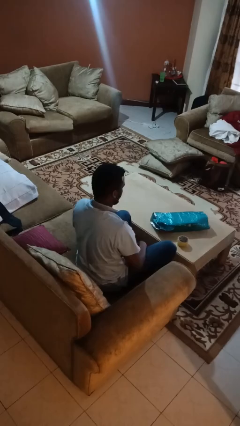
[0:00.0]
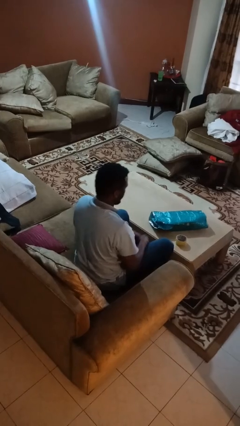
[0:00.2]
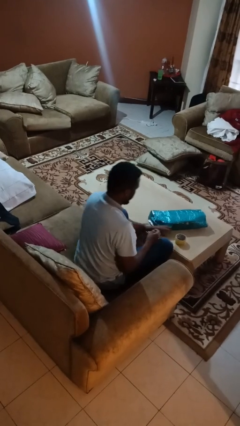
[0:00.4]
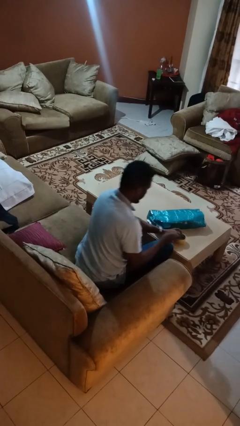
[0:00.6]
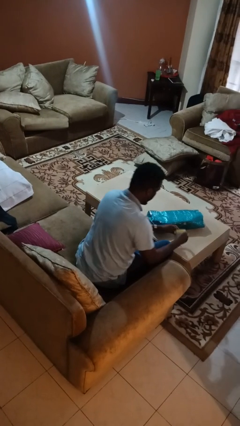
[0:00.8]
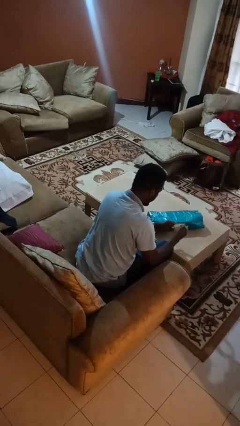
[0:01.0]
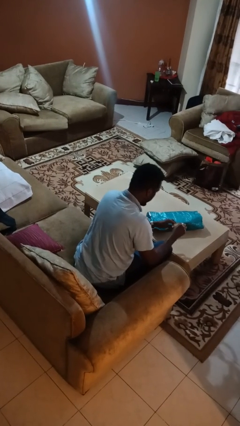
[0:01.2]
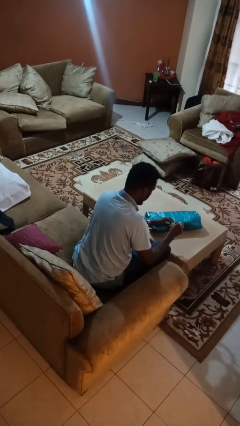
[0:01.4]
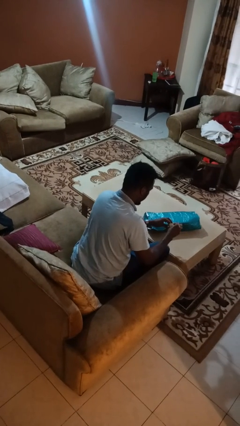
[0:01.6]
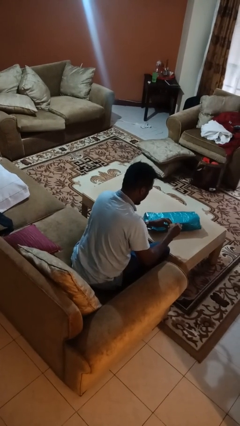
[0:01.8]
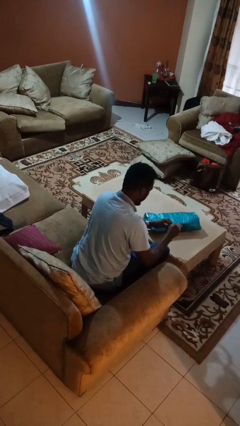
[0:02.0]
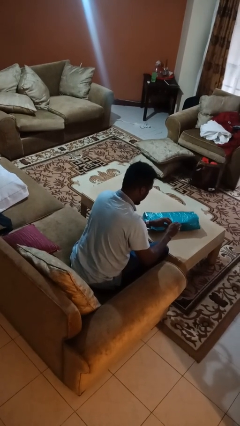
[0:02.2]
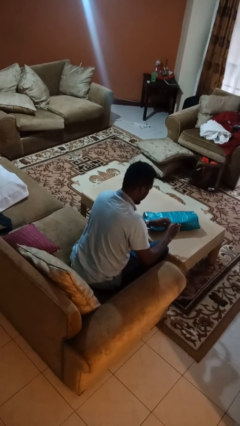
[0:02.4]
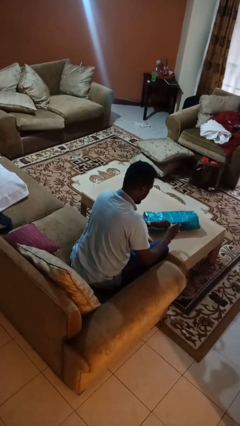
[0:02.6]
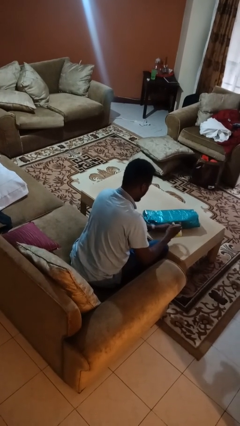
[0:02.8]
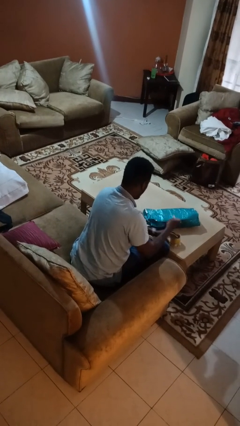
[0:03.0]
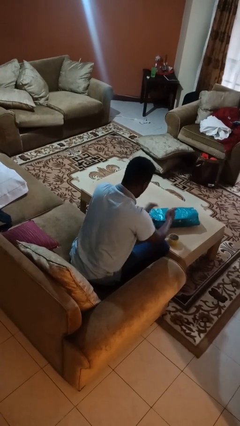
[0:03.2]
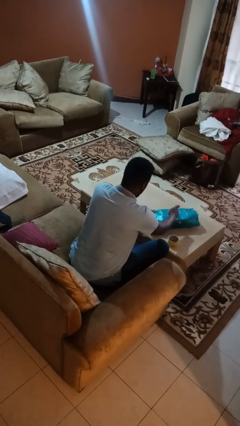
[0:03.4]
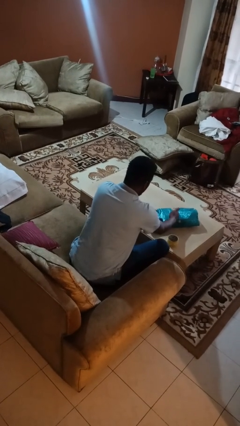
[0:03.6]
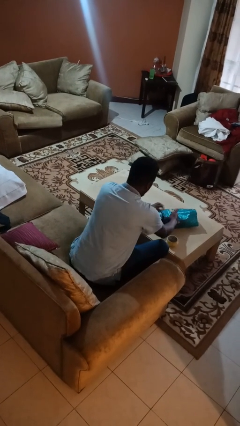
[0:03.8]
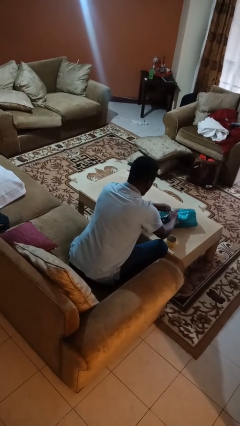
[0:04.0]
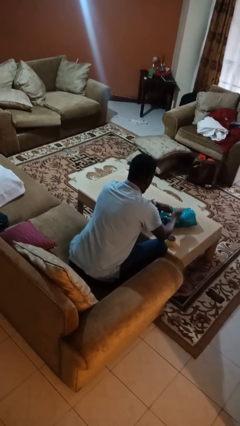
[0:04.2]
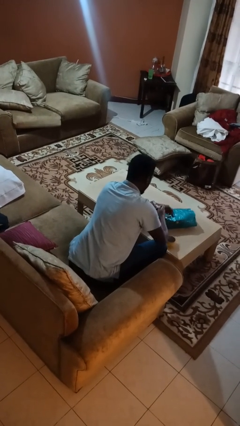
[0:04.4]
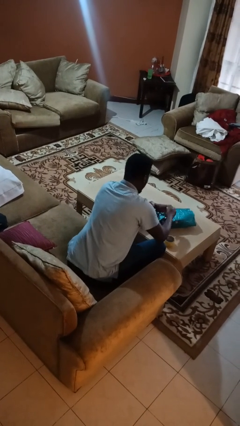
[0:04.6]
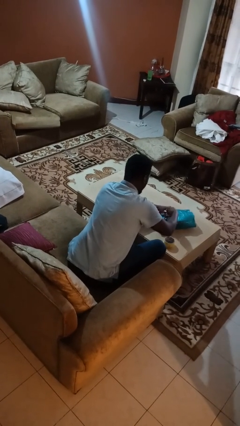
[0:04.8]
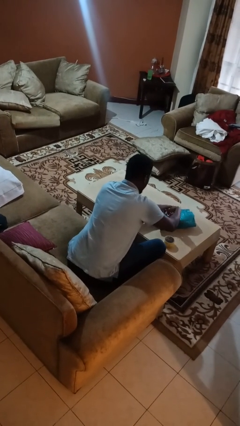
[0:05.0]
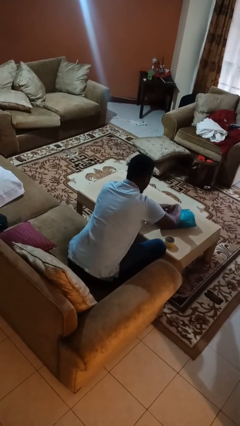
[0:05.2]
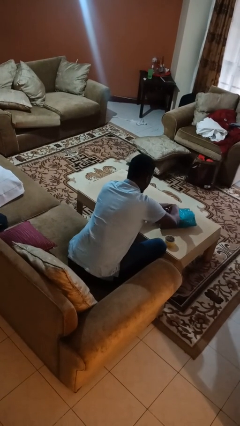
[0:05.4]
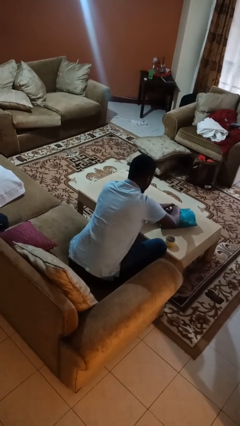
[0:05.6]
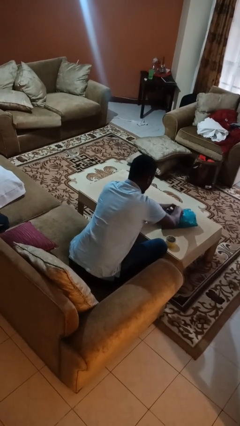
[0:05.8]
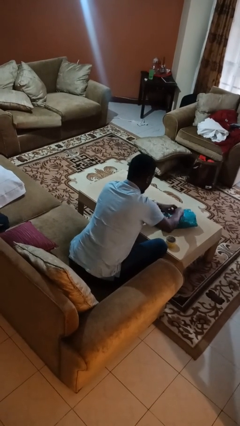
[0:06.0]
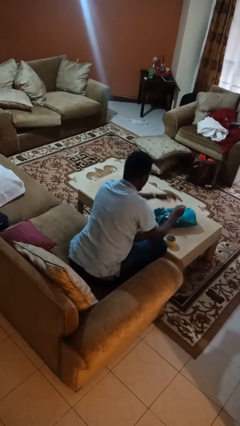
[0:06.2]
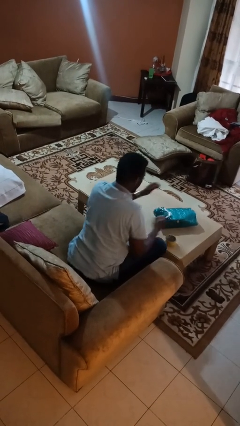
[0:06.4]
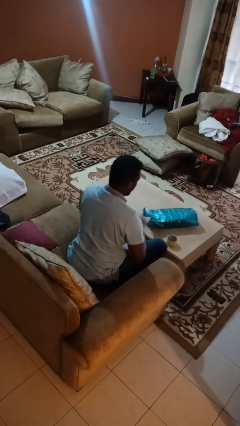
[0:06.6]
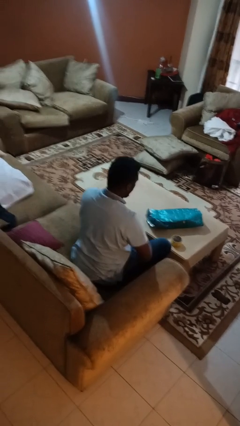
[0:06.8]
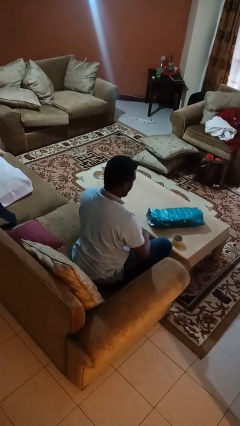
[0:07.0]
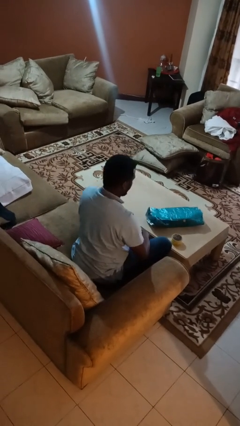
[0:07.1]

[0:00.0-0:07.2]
person wraps box

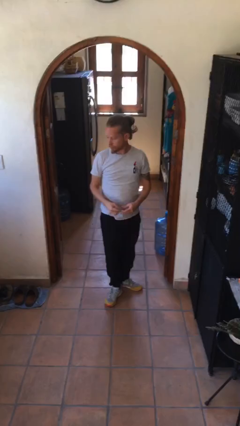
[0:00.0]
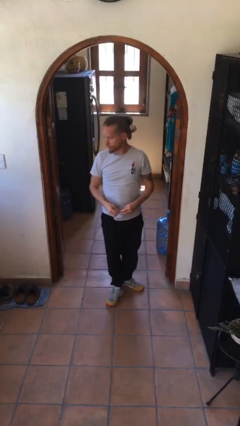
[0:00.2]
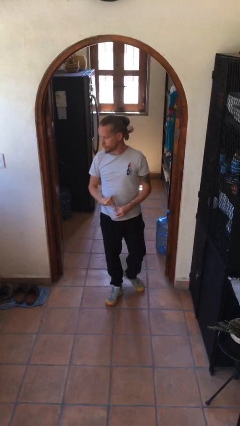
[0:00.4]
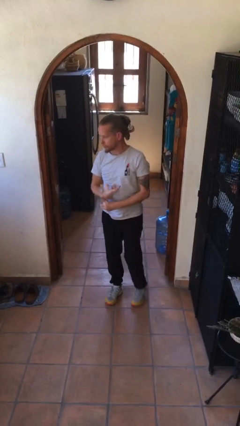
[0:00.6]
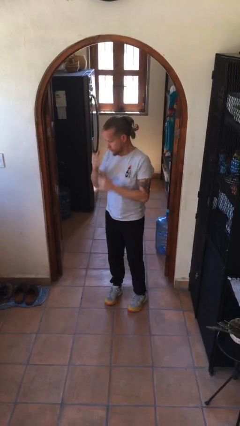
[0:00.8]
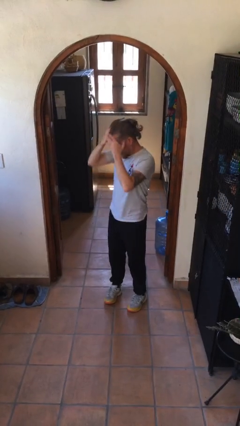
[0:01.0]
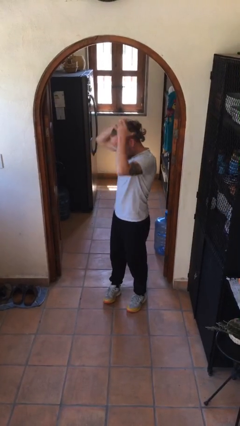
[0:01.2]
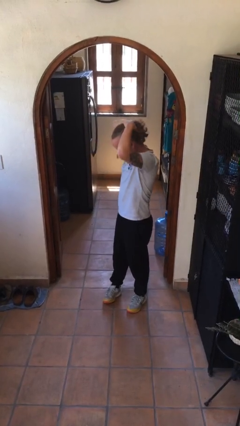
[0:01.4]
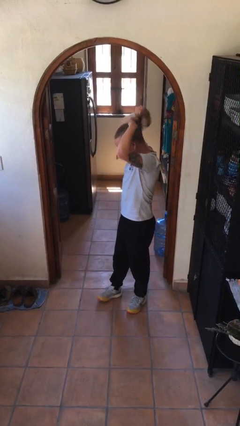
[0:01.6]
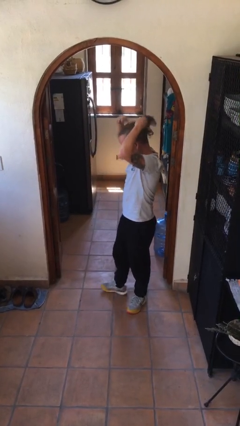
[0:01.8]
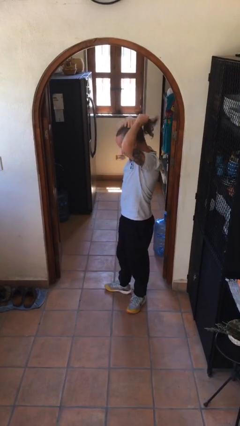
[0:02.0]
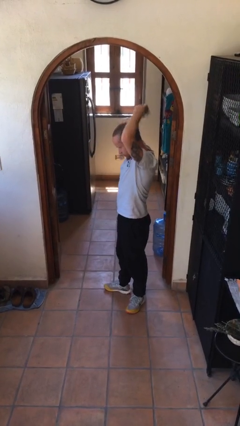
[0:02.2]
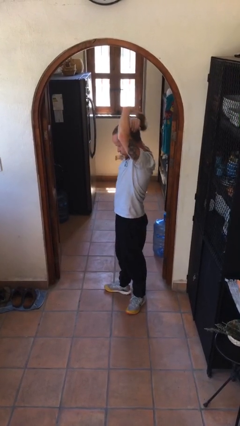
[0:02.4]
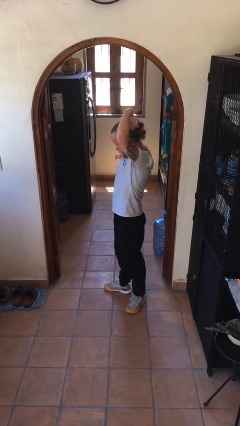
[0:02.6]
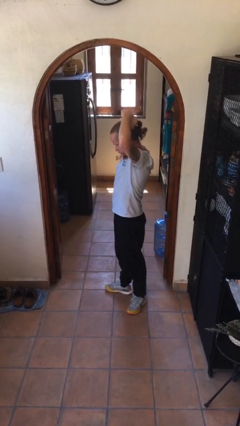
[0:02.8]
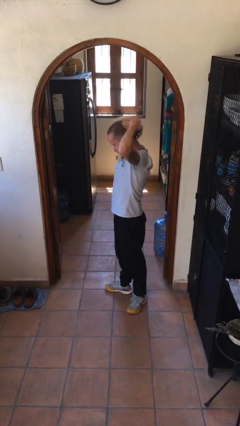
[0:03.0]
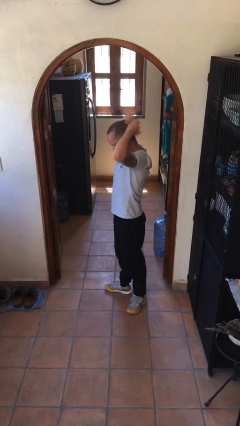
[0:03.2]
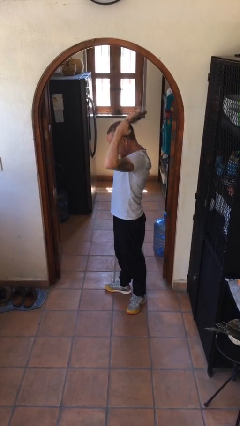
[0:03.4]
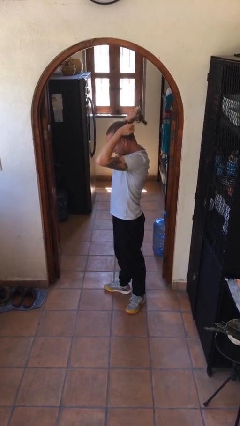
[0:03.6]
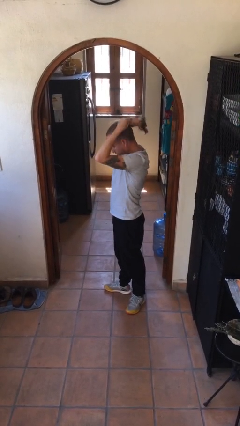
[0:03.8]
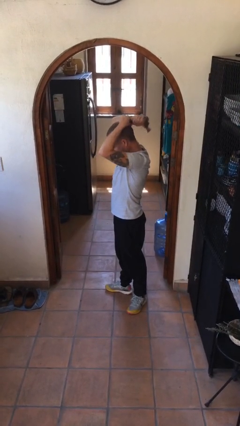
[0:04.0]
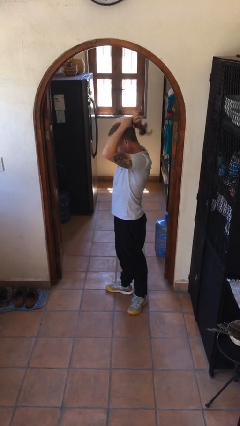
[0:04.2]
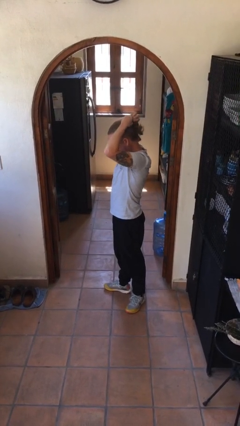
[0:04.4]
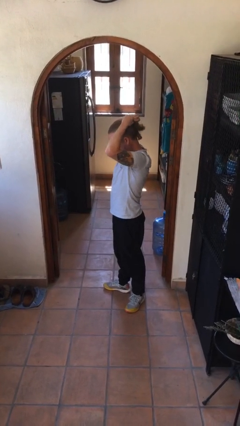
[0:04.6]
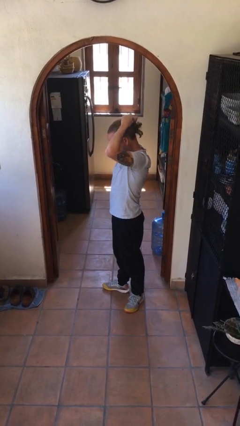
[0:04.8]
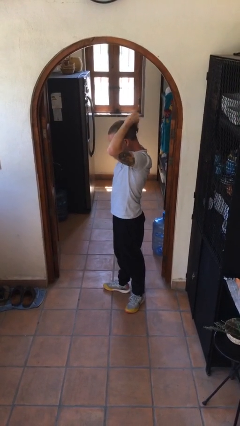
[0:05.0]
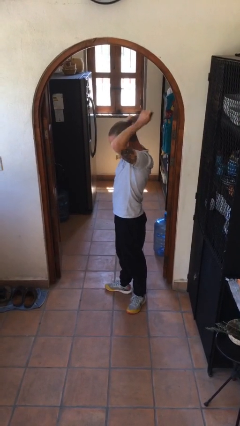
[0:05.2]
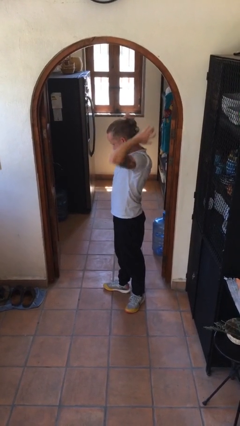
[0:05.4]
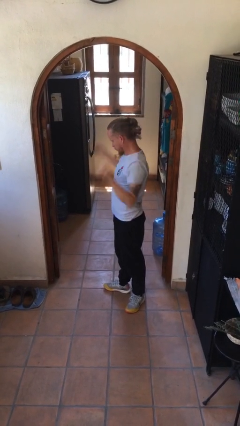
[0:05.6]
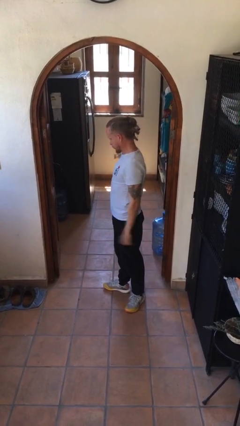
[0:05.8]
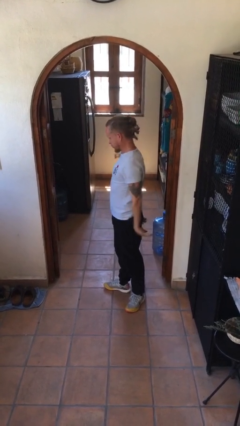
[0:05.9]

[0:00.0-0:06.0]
person puts hair in ponytail

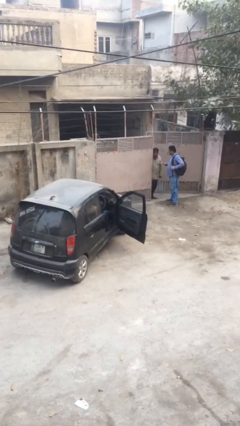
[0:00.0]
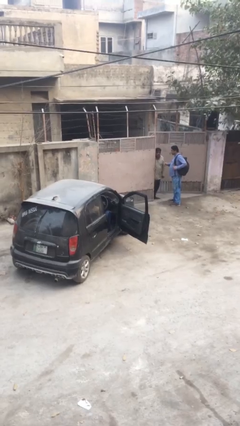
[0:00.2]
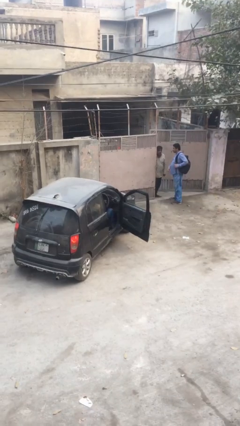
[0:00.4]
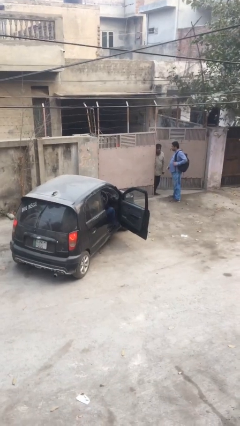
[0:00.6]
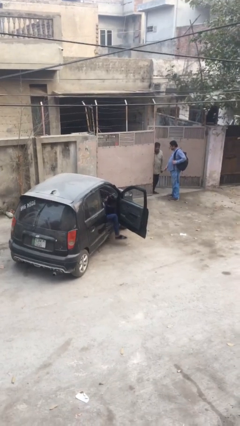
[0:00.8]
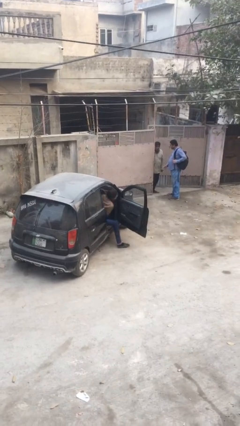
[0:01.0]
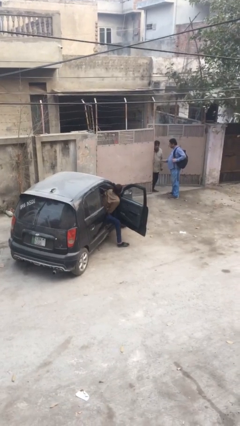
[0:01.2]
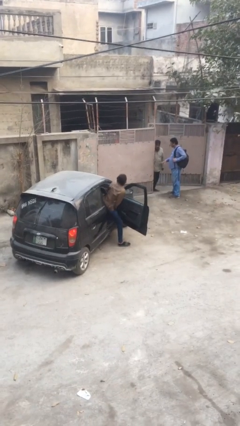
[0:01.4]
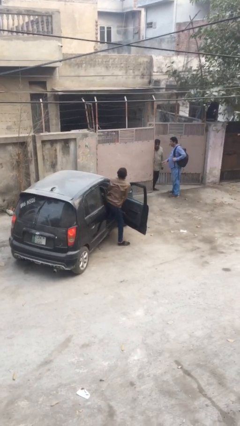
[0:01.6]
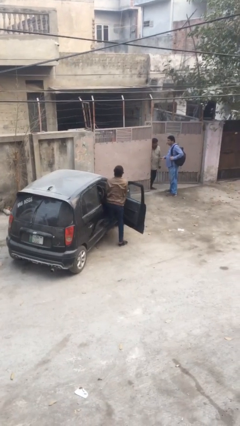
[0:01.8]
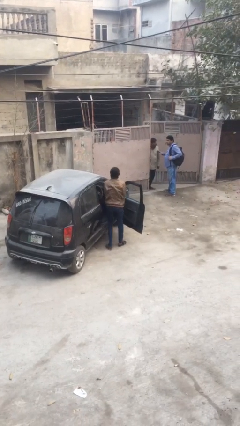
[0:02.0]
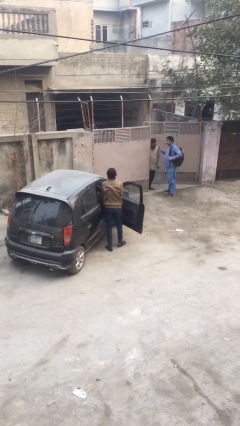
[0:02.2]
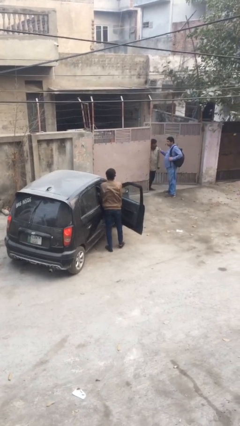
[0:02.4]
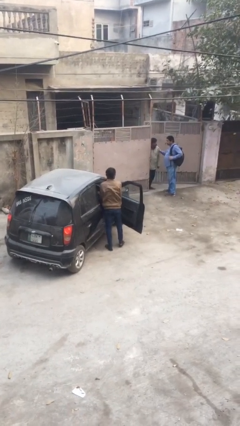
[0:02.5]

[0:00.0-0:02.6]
person exits car

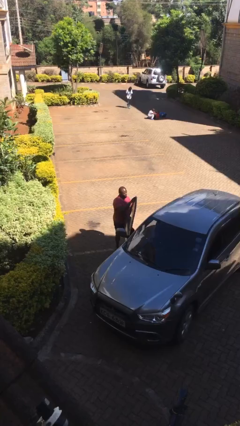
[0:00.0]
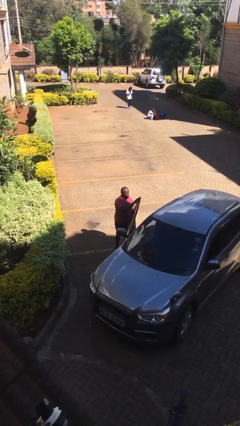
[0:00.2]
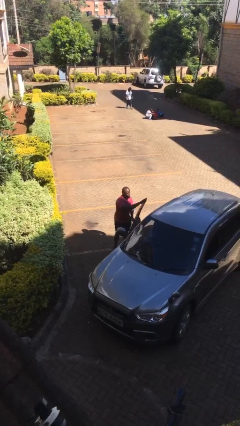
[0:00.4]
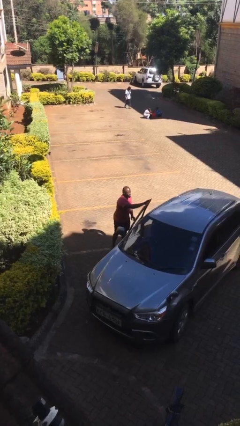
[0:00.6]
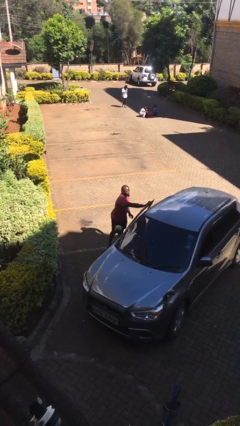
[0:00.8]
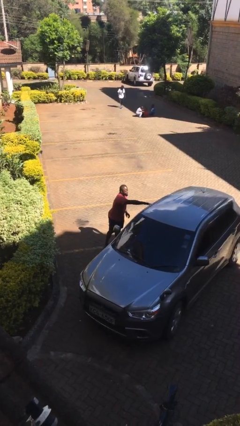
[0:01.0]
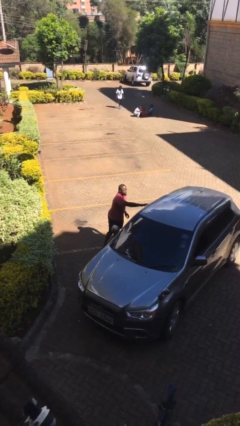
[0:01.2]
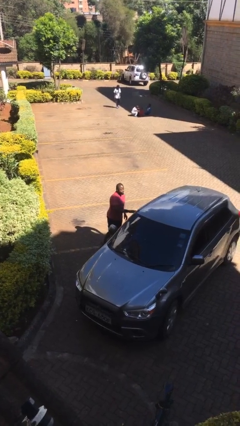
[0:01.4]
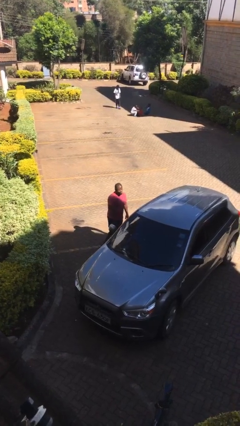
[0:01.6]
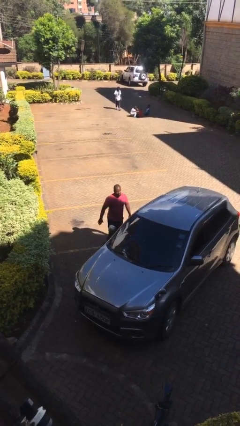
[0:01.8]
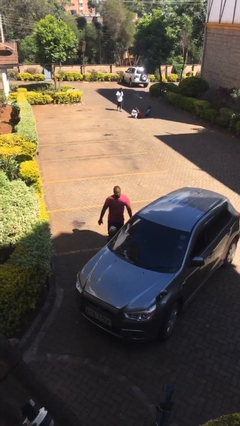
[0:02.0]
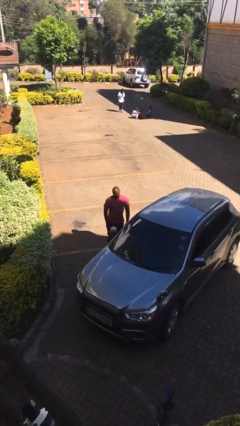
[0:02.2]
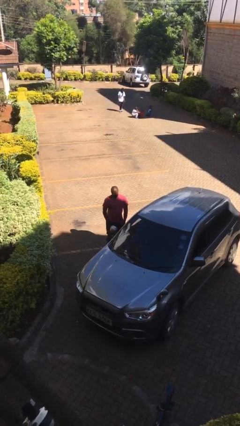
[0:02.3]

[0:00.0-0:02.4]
person closes car door
